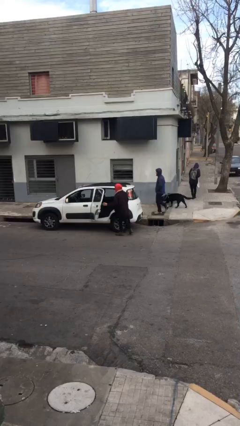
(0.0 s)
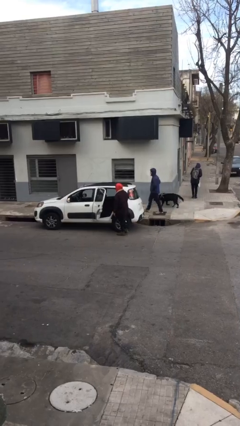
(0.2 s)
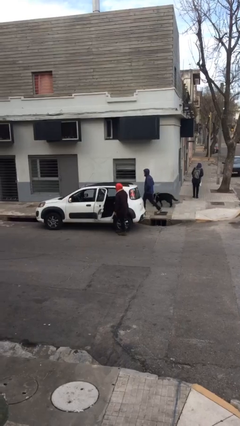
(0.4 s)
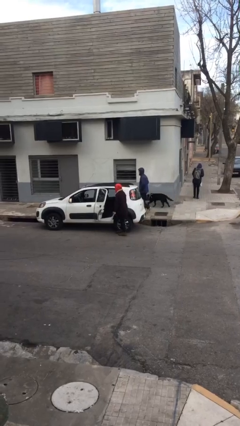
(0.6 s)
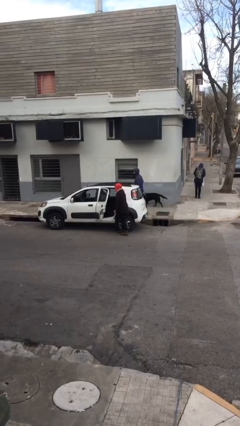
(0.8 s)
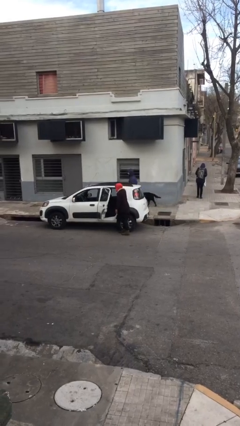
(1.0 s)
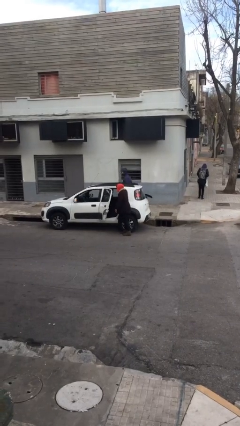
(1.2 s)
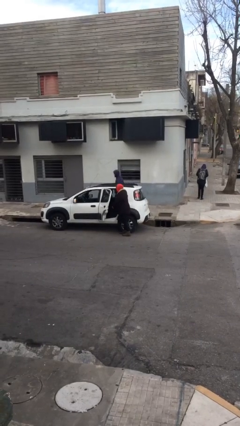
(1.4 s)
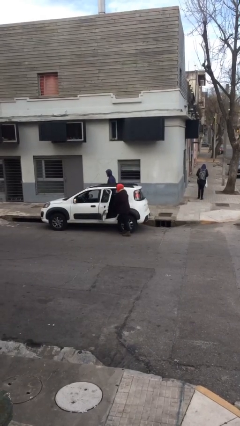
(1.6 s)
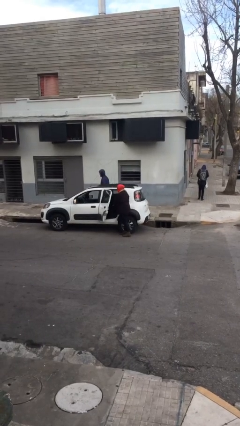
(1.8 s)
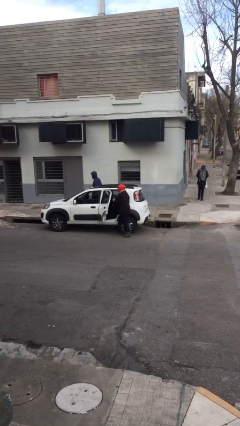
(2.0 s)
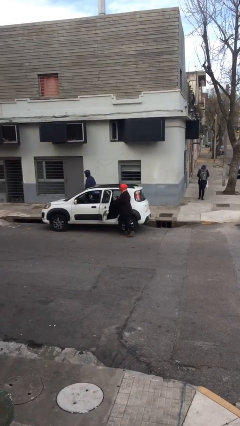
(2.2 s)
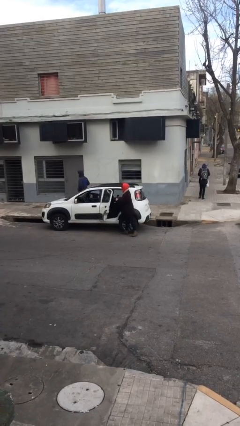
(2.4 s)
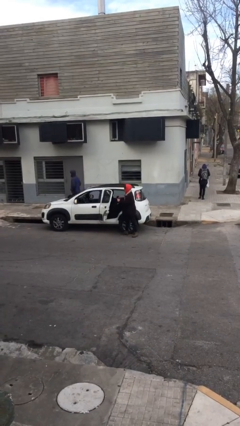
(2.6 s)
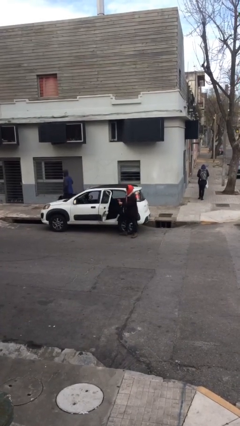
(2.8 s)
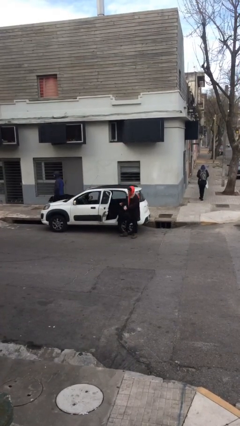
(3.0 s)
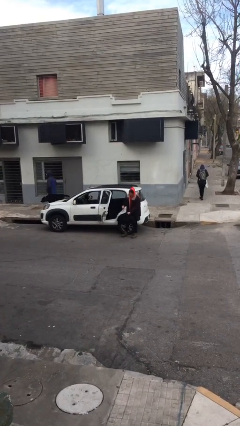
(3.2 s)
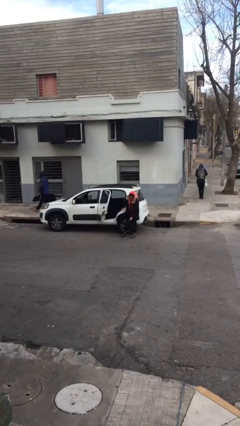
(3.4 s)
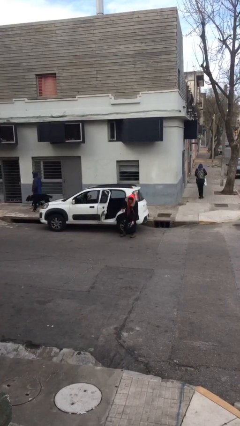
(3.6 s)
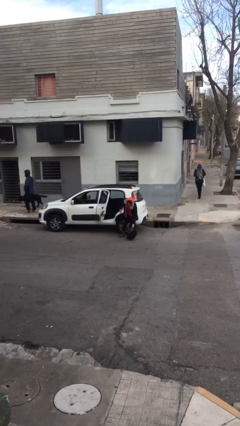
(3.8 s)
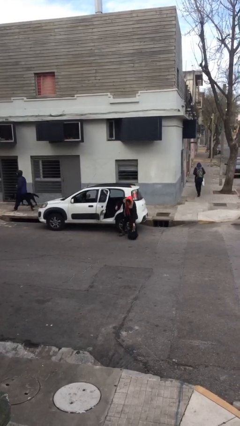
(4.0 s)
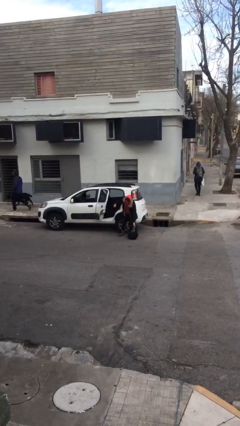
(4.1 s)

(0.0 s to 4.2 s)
person unloads car

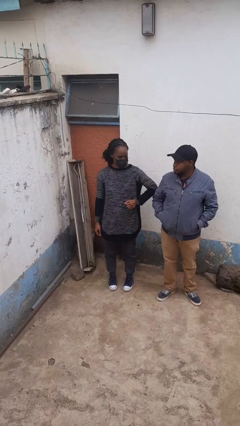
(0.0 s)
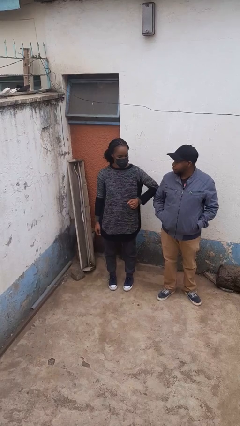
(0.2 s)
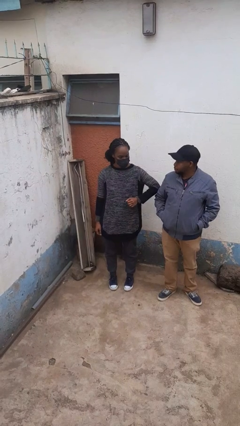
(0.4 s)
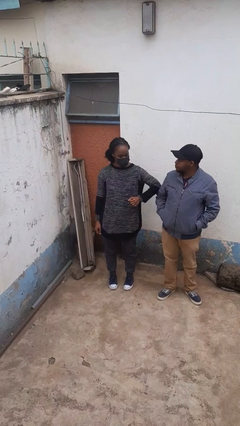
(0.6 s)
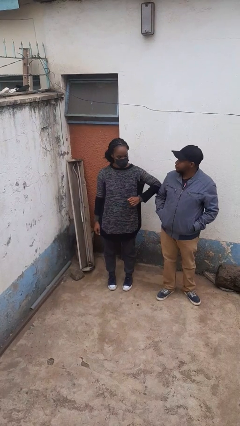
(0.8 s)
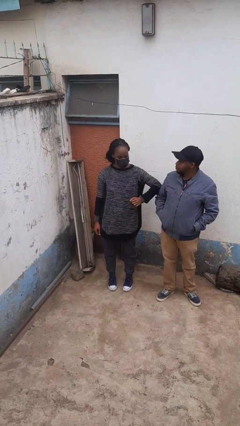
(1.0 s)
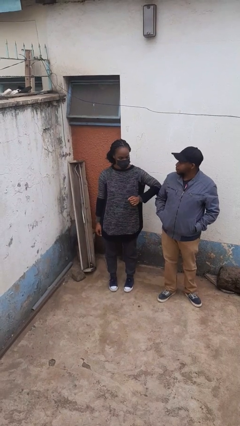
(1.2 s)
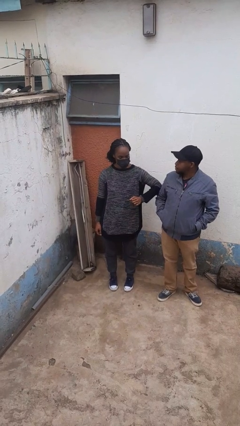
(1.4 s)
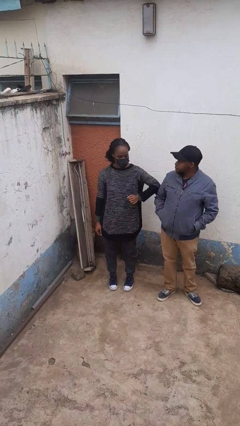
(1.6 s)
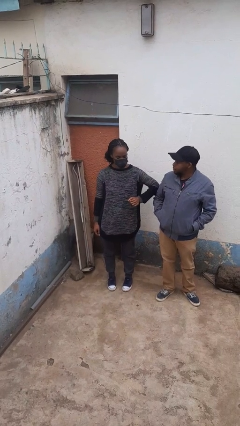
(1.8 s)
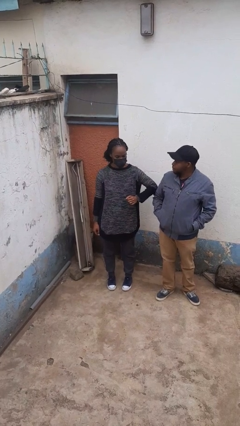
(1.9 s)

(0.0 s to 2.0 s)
person nudges person with elbow

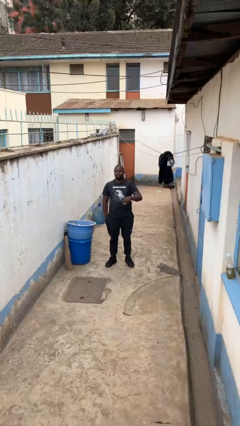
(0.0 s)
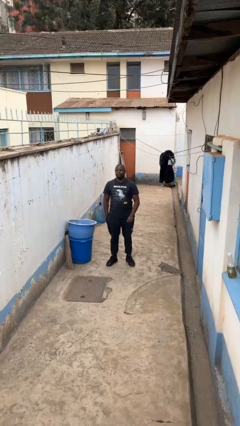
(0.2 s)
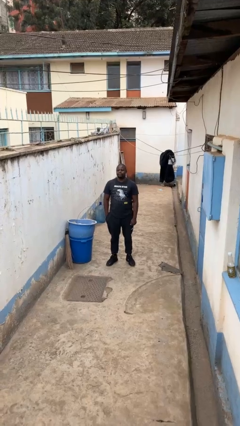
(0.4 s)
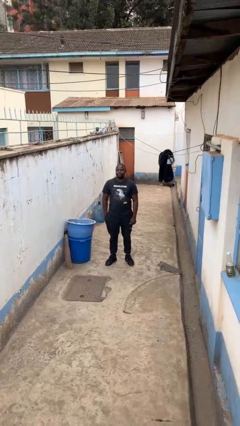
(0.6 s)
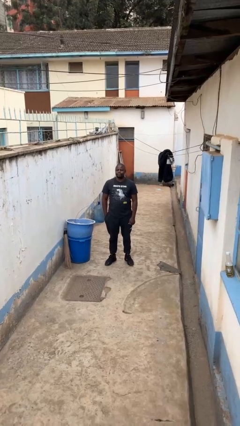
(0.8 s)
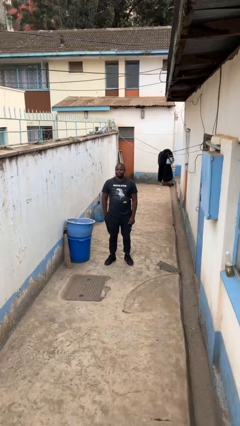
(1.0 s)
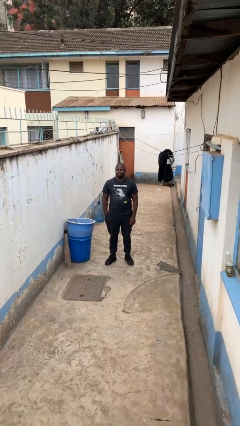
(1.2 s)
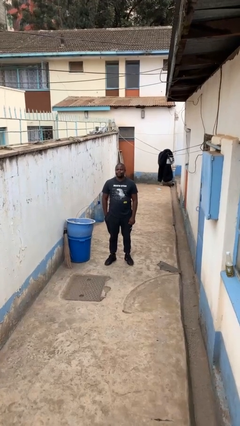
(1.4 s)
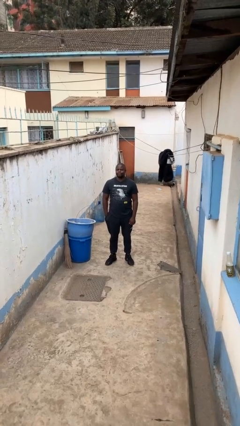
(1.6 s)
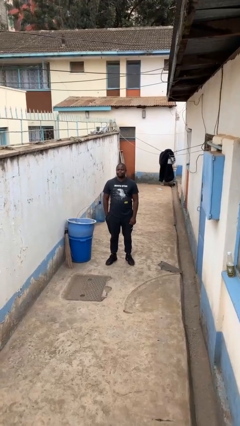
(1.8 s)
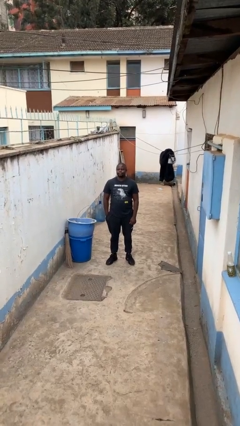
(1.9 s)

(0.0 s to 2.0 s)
person gestures lower hand

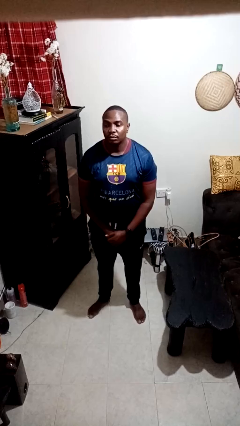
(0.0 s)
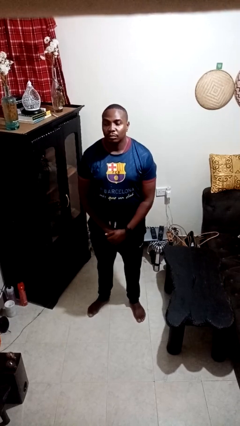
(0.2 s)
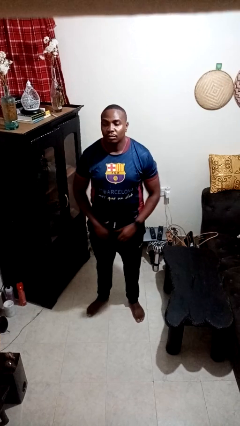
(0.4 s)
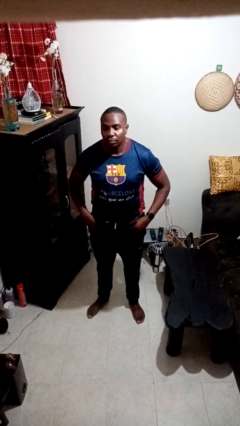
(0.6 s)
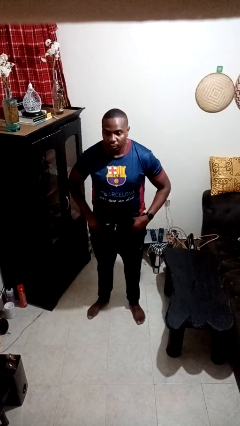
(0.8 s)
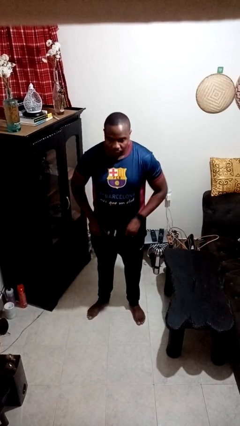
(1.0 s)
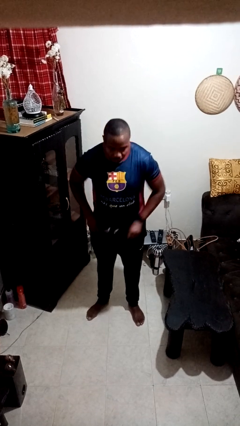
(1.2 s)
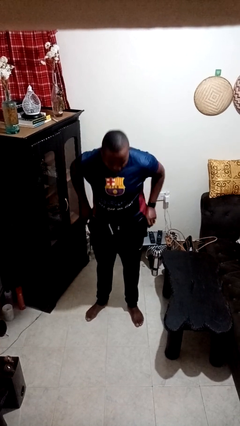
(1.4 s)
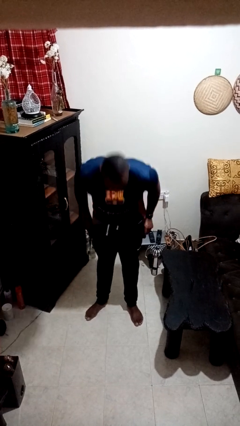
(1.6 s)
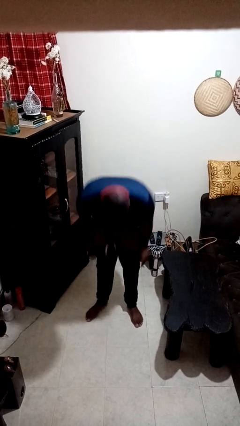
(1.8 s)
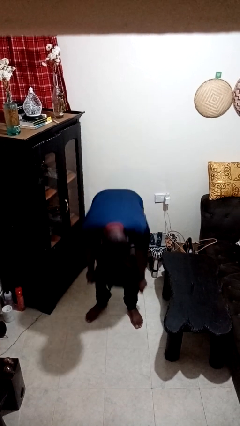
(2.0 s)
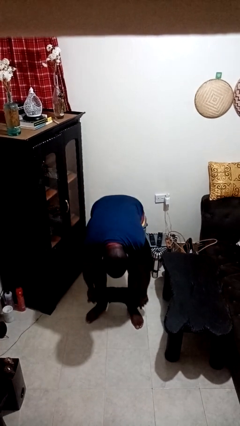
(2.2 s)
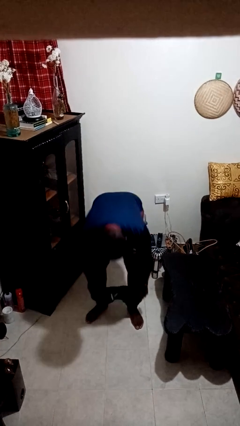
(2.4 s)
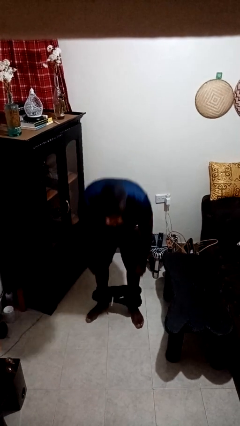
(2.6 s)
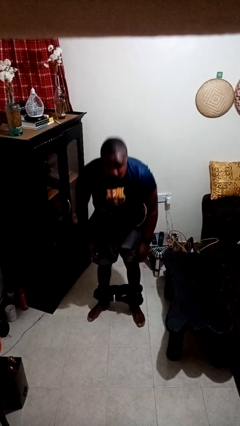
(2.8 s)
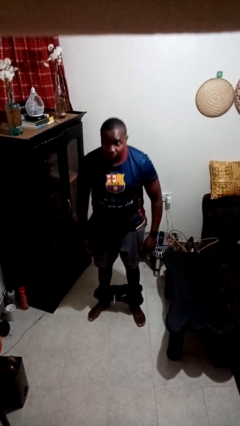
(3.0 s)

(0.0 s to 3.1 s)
person takes off pants

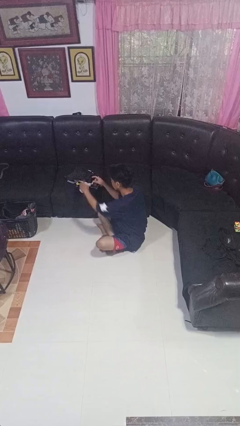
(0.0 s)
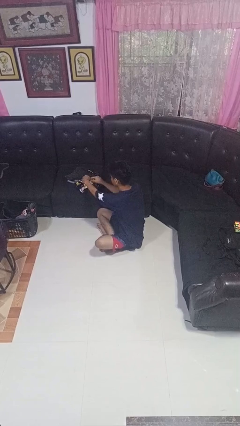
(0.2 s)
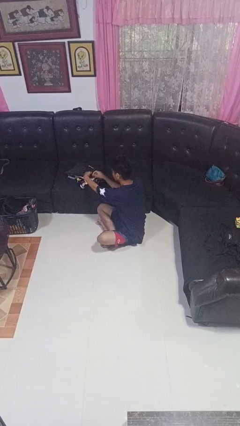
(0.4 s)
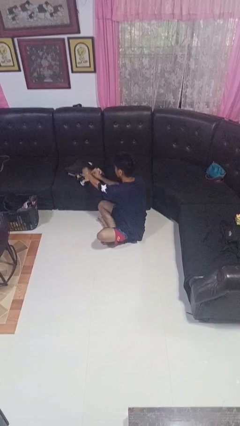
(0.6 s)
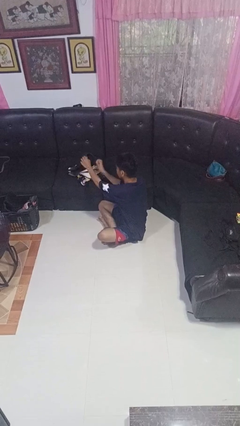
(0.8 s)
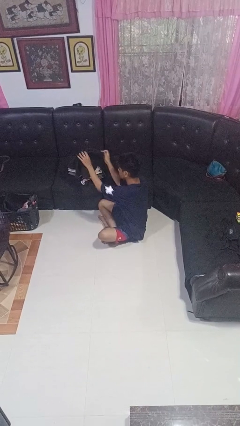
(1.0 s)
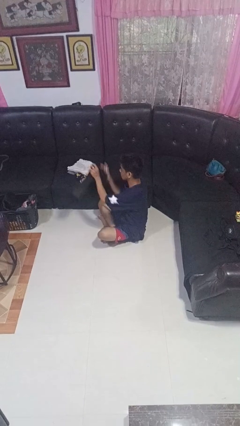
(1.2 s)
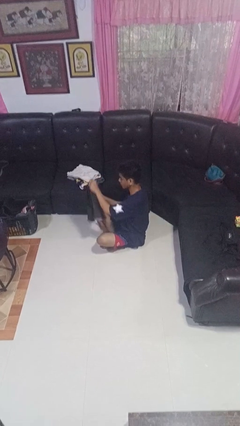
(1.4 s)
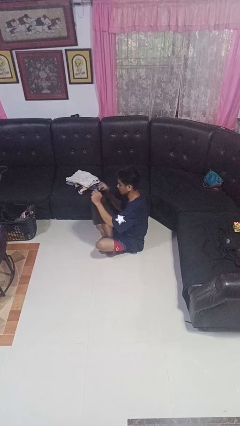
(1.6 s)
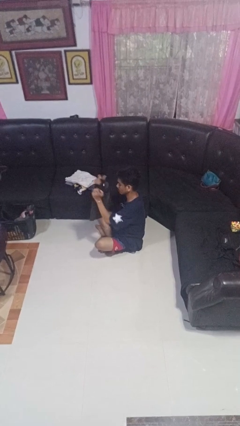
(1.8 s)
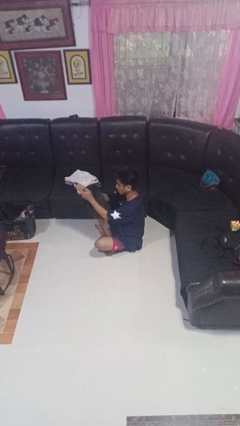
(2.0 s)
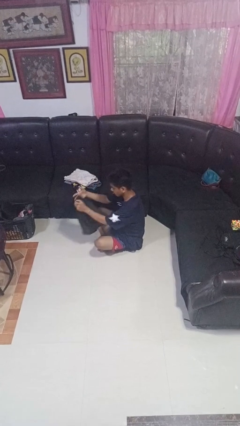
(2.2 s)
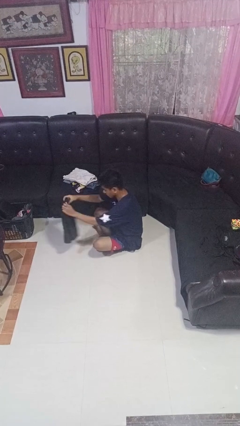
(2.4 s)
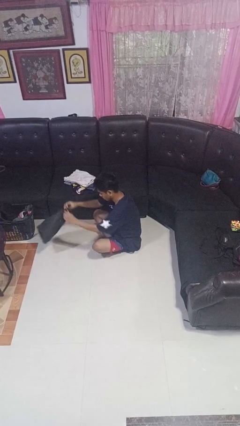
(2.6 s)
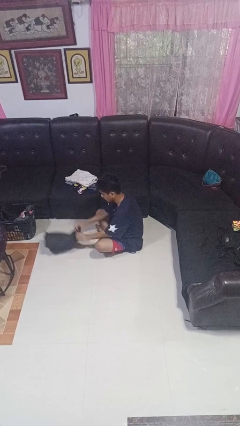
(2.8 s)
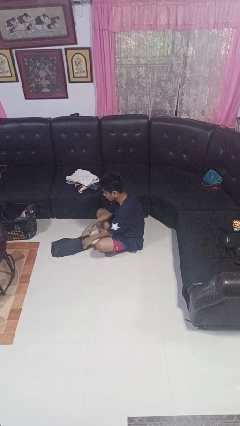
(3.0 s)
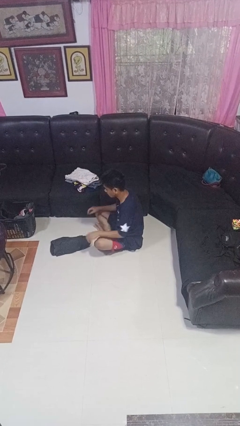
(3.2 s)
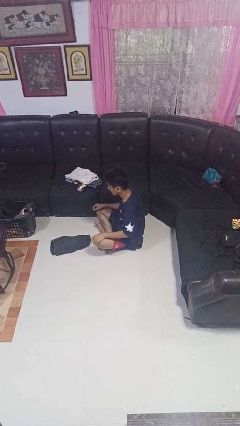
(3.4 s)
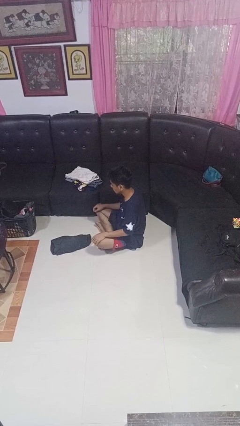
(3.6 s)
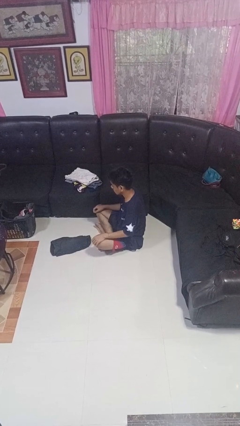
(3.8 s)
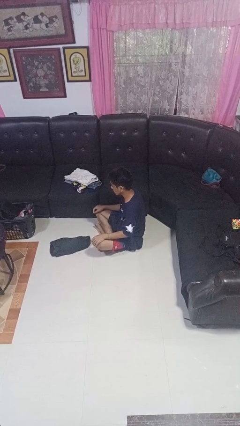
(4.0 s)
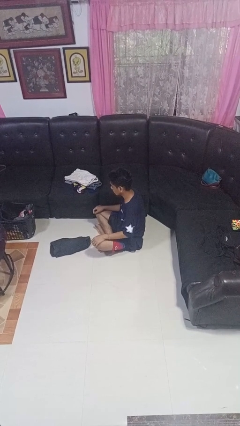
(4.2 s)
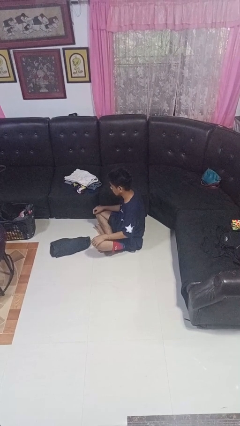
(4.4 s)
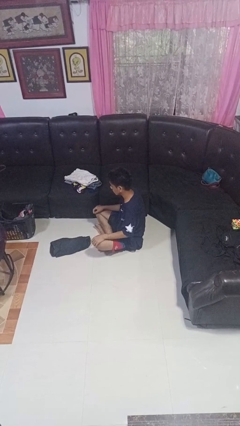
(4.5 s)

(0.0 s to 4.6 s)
person folds pants

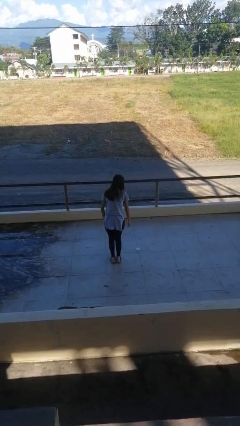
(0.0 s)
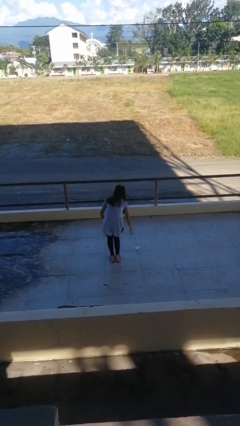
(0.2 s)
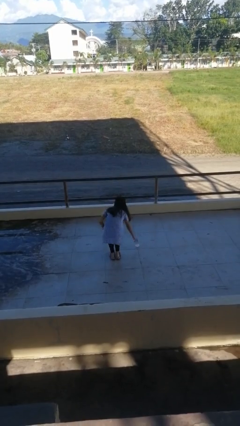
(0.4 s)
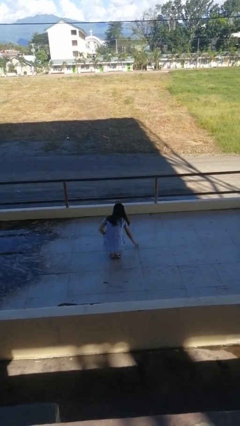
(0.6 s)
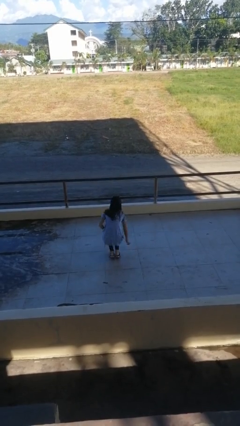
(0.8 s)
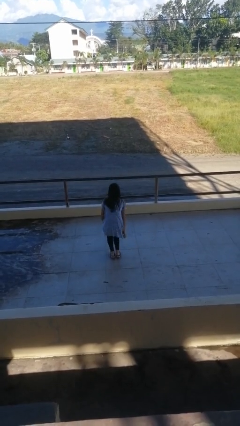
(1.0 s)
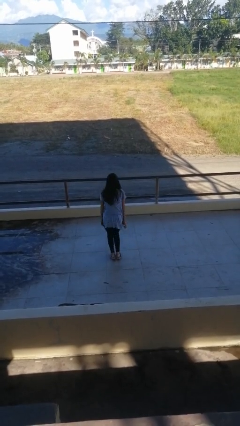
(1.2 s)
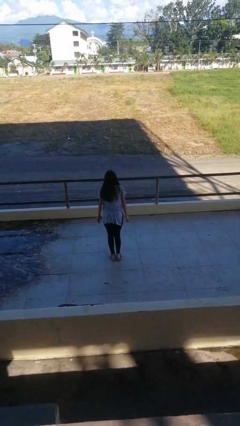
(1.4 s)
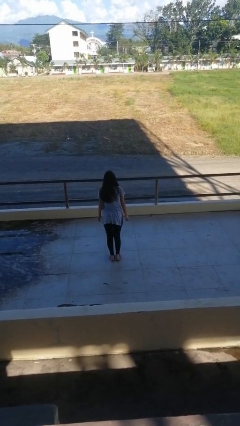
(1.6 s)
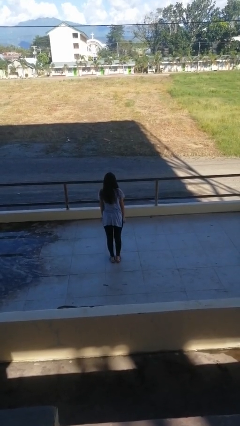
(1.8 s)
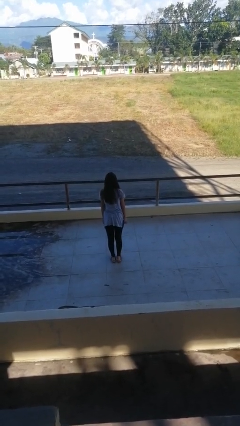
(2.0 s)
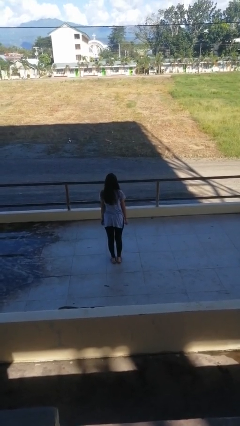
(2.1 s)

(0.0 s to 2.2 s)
person picks up object from floor
